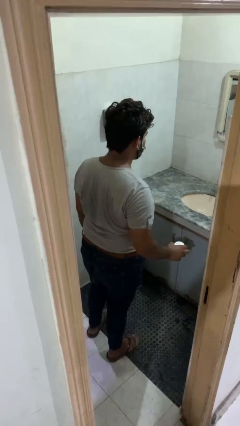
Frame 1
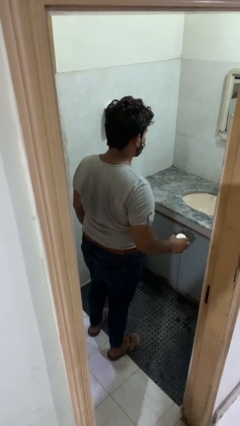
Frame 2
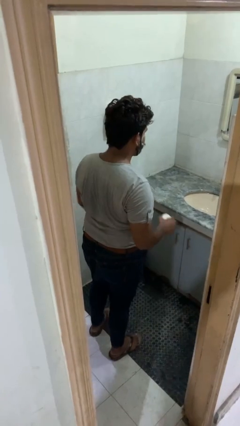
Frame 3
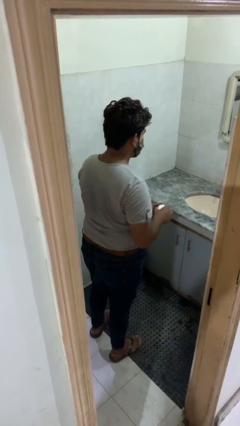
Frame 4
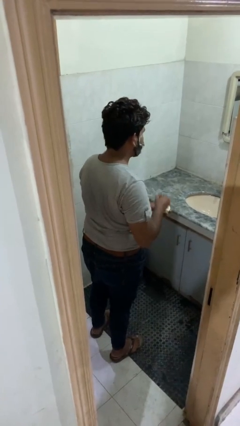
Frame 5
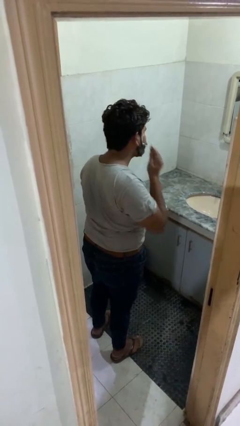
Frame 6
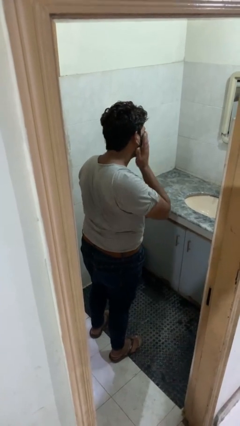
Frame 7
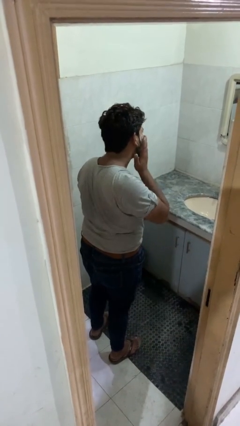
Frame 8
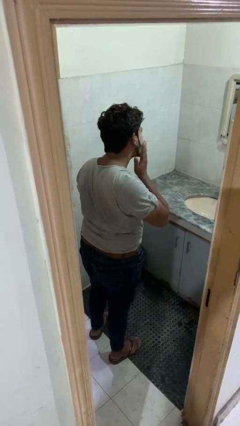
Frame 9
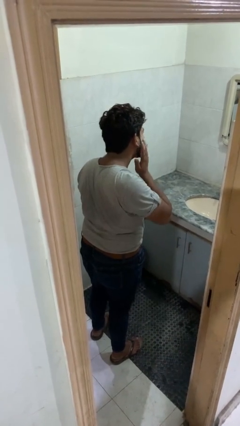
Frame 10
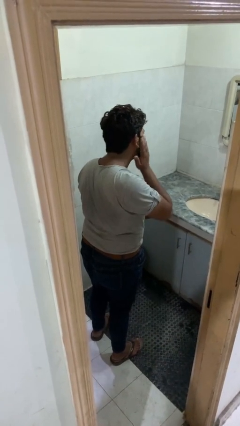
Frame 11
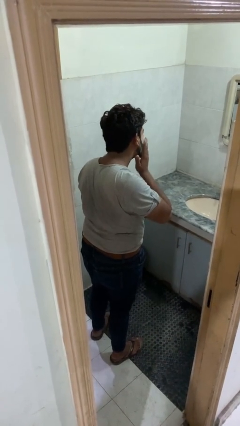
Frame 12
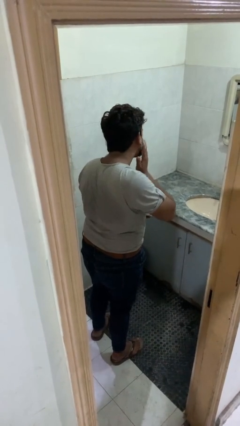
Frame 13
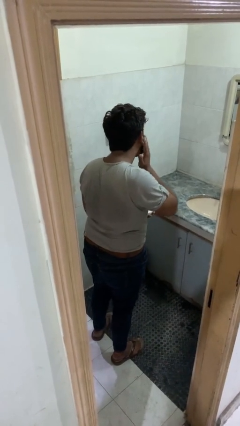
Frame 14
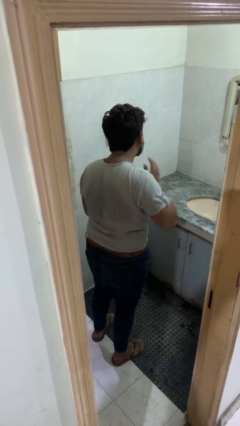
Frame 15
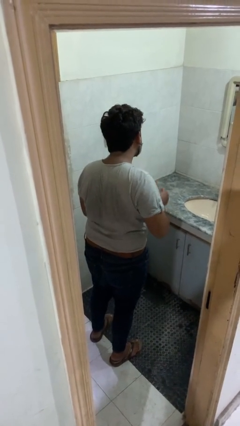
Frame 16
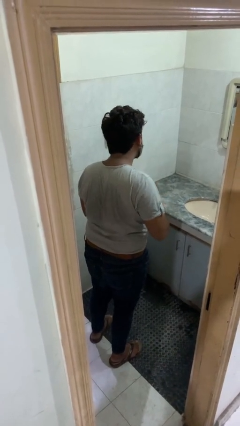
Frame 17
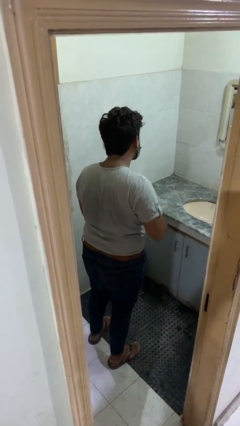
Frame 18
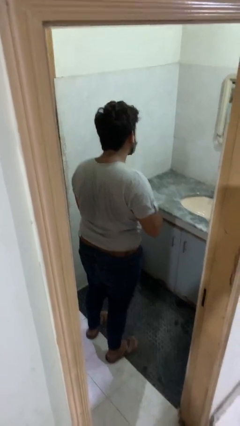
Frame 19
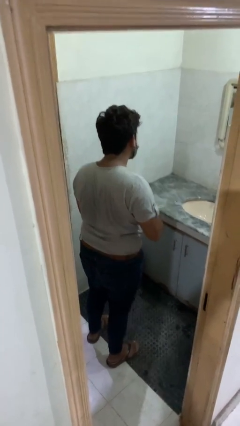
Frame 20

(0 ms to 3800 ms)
person applies shaving cream

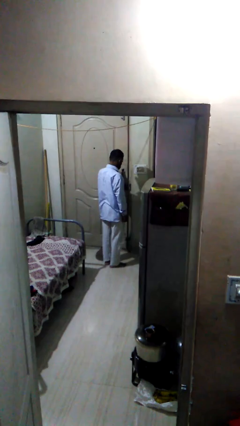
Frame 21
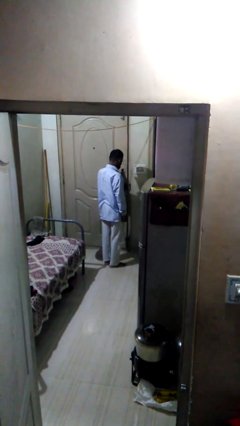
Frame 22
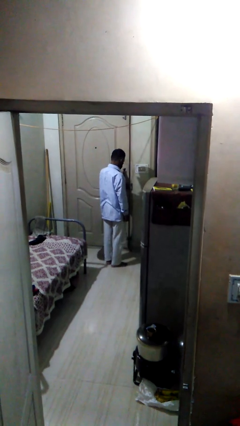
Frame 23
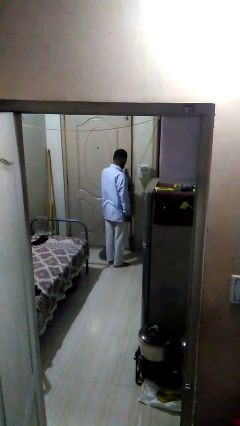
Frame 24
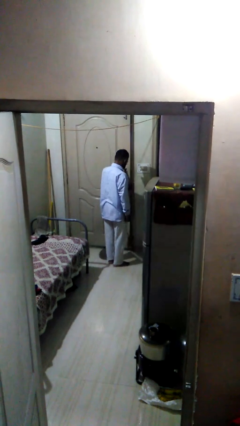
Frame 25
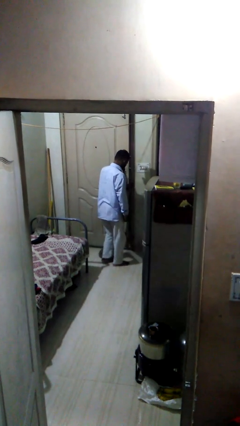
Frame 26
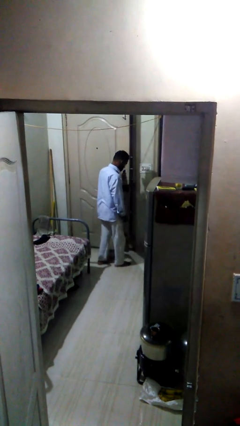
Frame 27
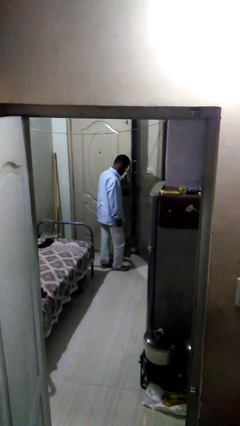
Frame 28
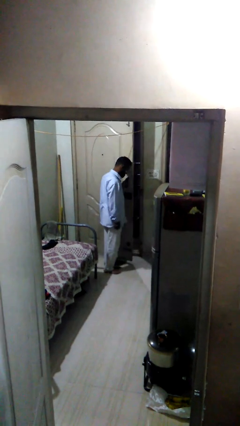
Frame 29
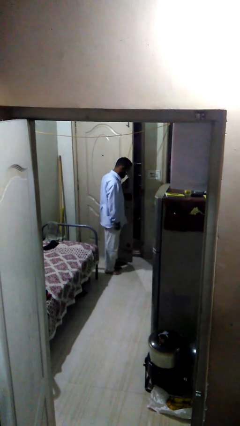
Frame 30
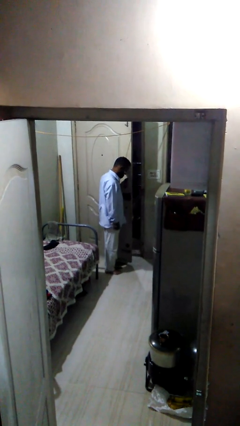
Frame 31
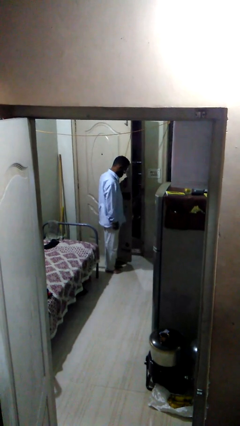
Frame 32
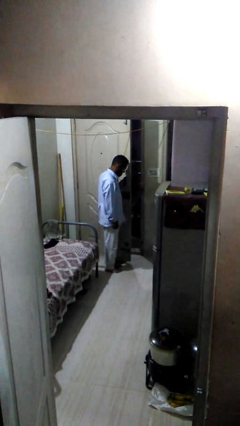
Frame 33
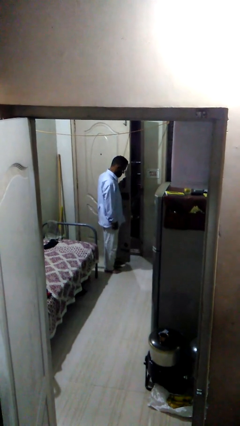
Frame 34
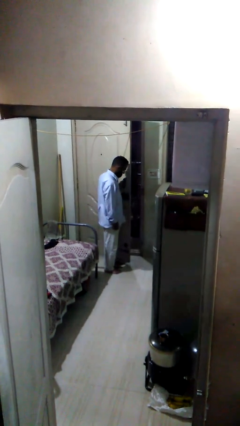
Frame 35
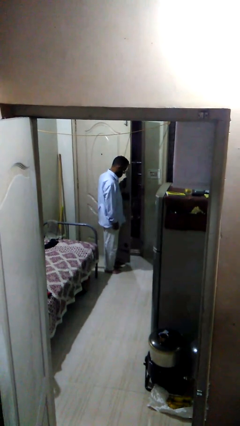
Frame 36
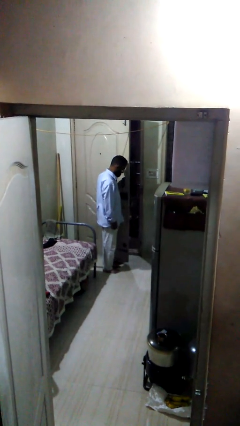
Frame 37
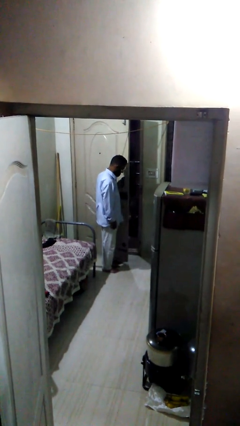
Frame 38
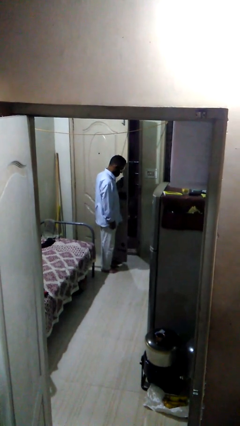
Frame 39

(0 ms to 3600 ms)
person opens facility door

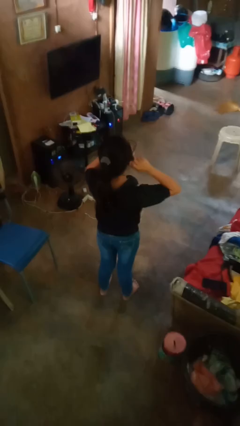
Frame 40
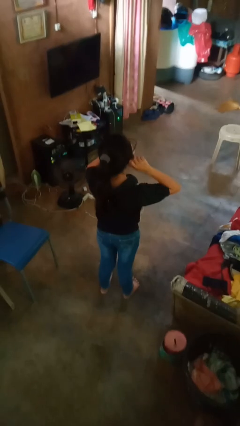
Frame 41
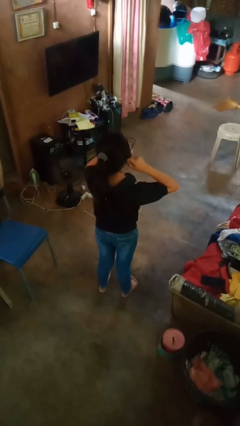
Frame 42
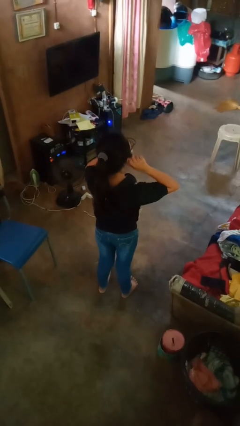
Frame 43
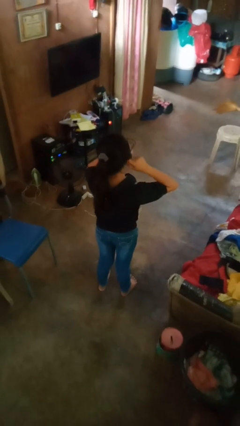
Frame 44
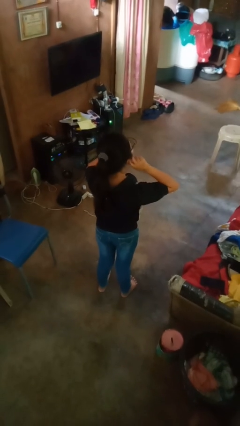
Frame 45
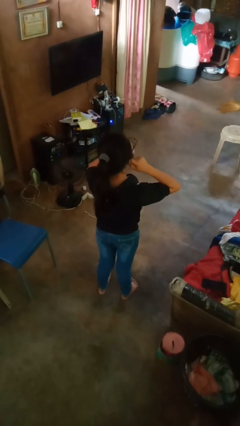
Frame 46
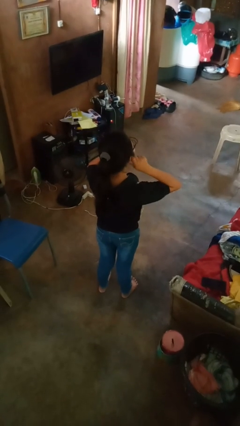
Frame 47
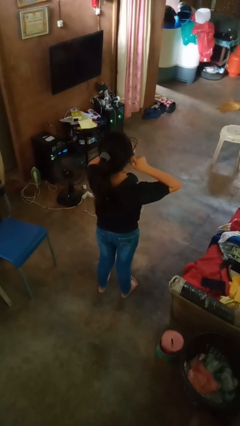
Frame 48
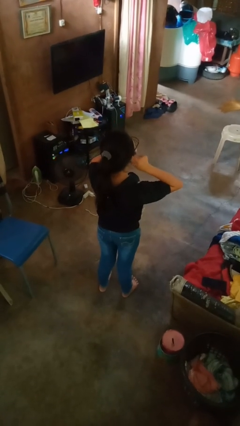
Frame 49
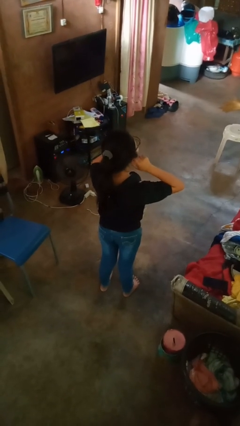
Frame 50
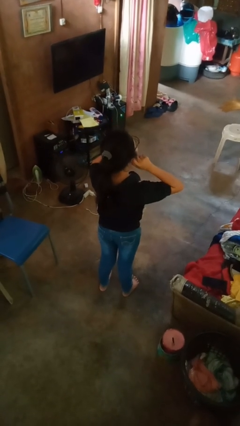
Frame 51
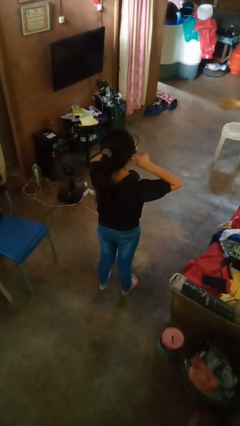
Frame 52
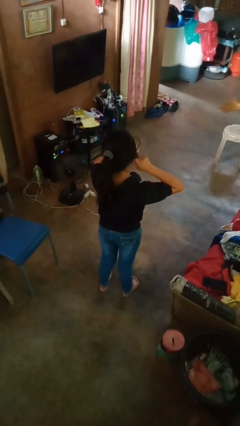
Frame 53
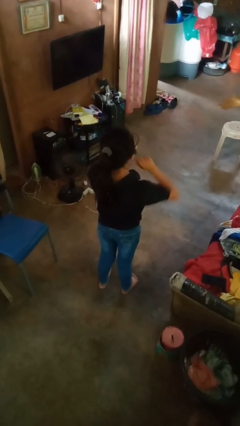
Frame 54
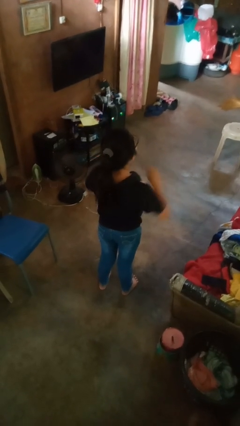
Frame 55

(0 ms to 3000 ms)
person touches earlobe

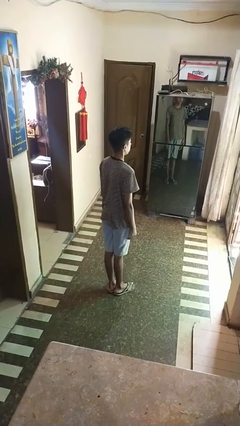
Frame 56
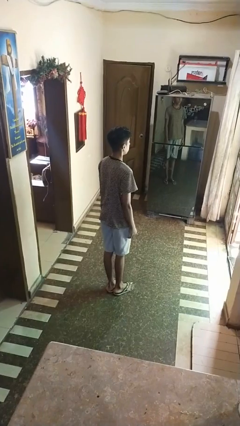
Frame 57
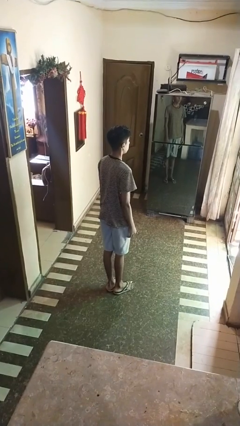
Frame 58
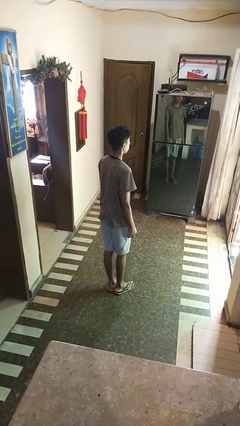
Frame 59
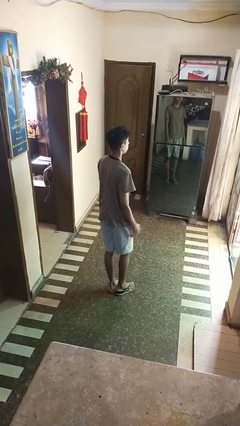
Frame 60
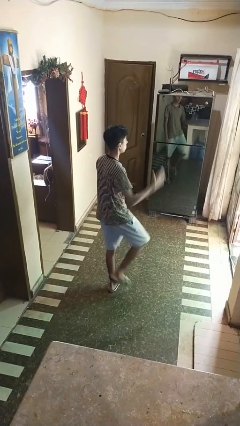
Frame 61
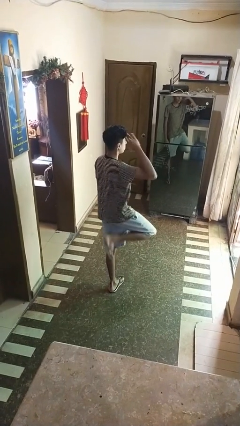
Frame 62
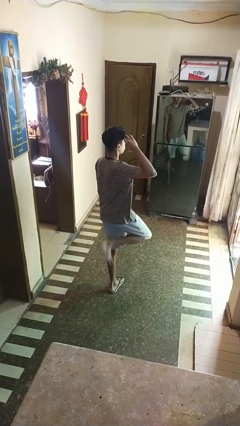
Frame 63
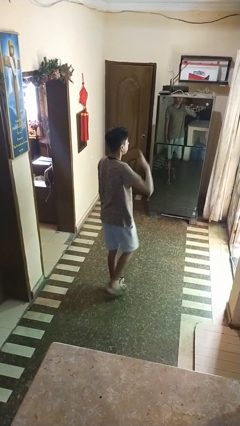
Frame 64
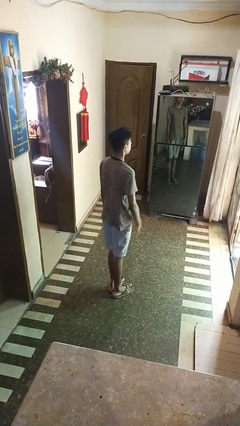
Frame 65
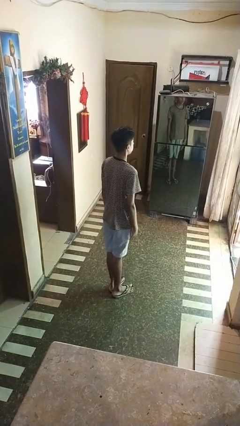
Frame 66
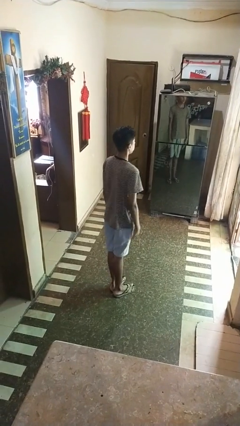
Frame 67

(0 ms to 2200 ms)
person salutes

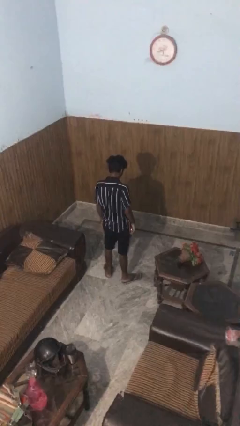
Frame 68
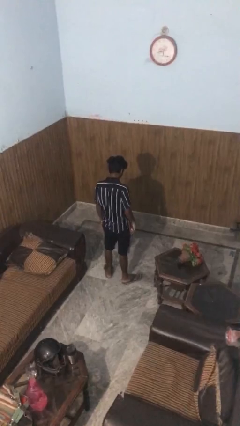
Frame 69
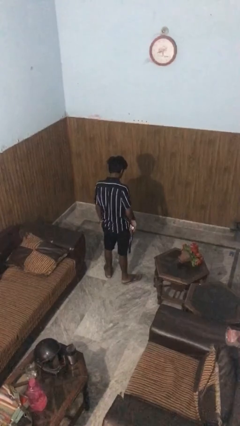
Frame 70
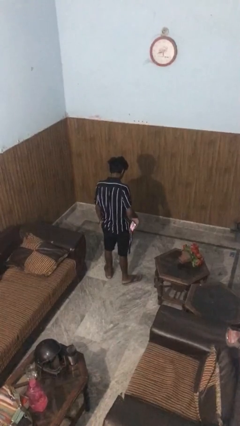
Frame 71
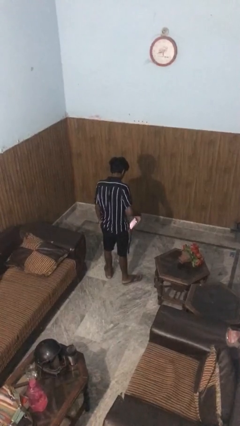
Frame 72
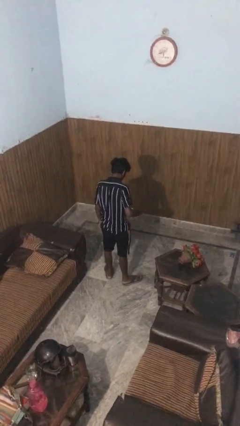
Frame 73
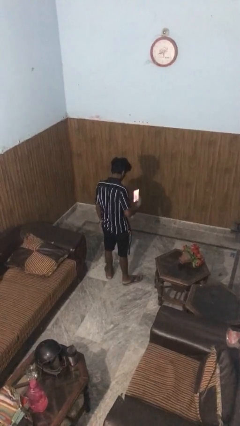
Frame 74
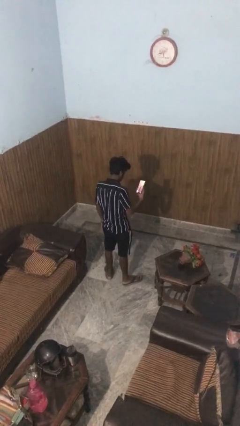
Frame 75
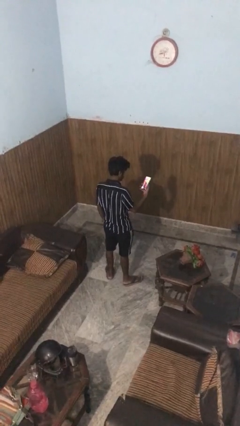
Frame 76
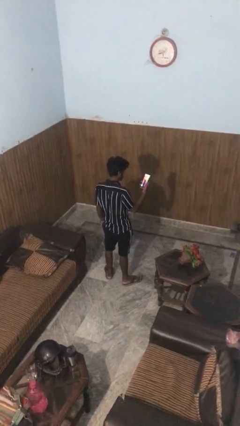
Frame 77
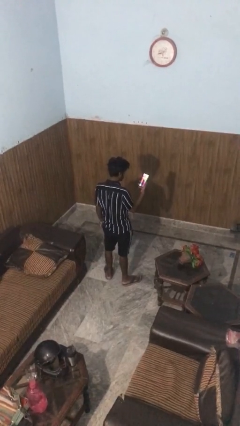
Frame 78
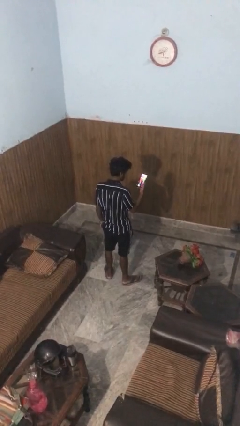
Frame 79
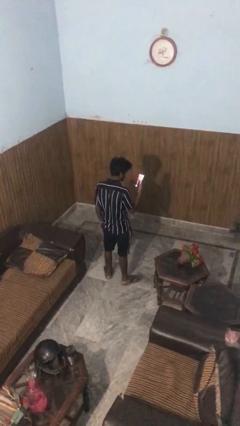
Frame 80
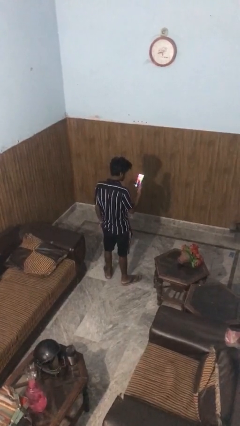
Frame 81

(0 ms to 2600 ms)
person takes phone from pocket

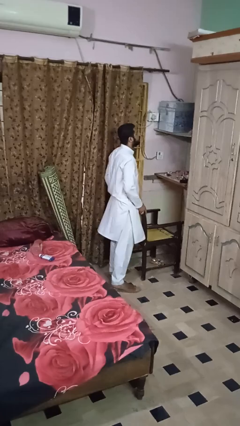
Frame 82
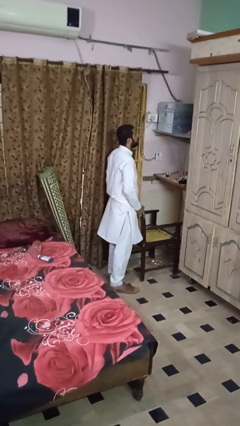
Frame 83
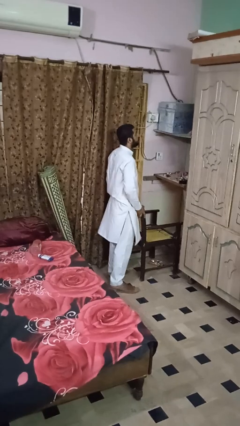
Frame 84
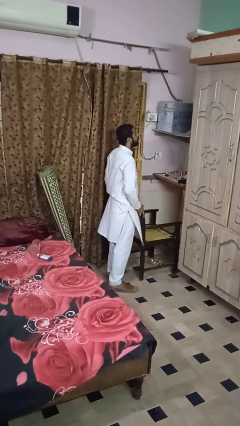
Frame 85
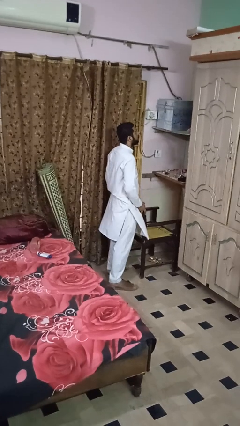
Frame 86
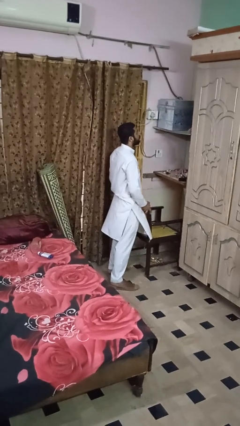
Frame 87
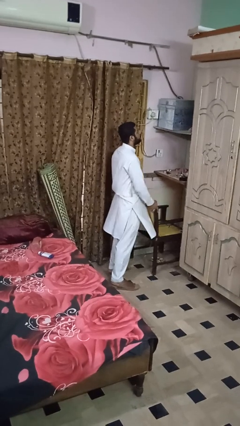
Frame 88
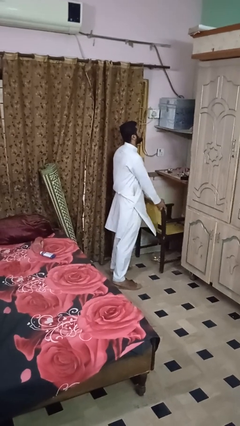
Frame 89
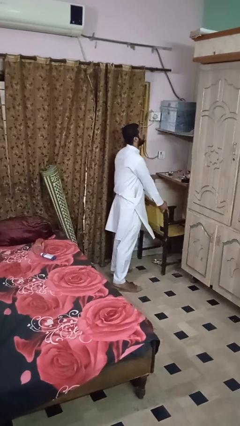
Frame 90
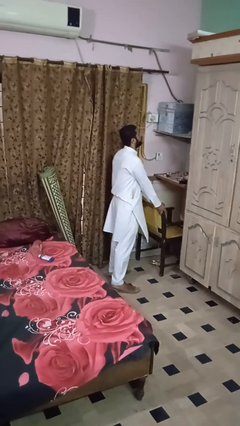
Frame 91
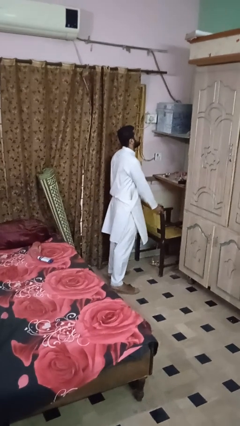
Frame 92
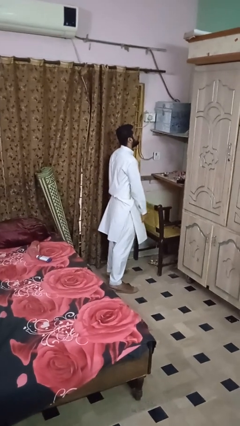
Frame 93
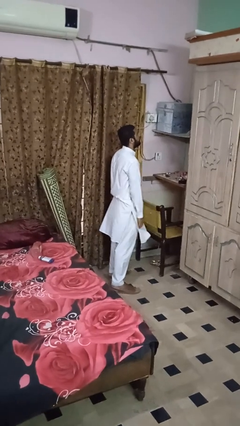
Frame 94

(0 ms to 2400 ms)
person pushes in chair
